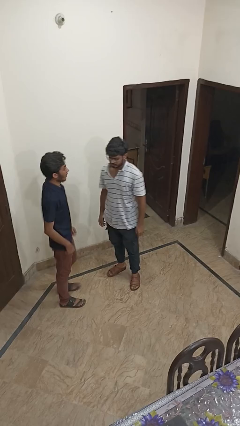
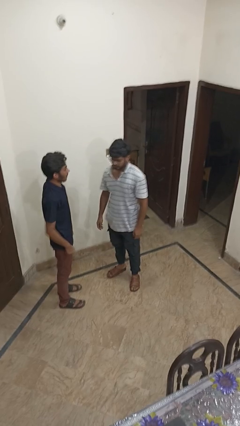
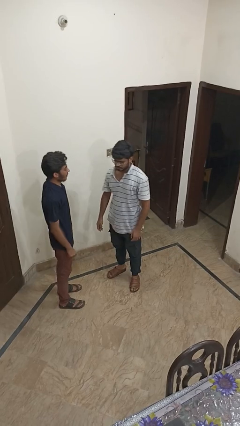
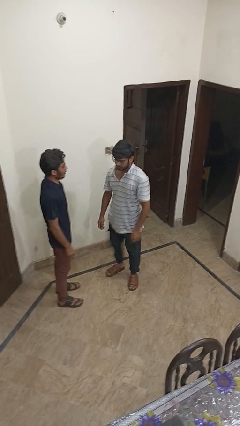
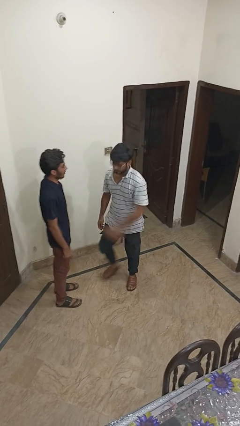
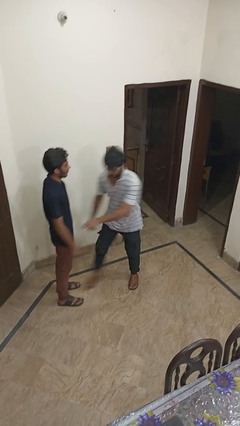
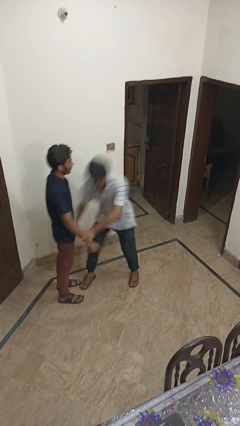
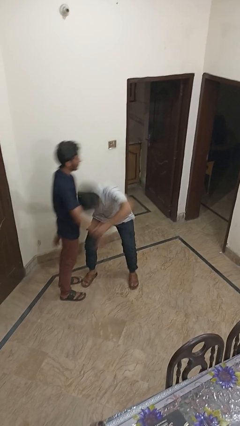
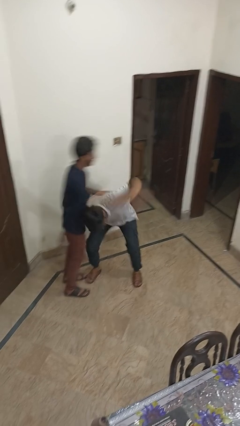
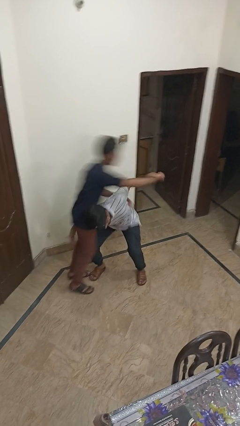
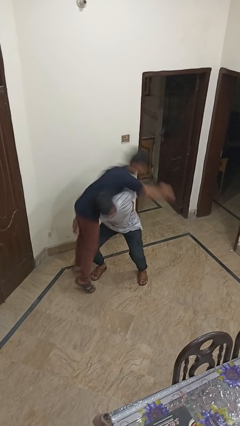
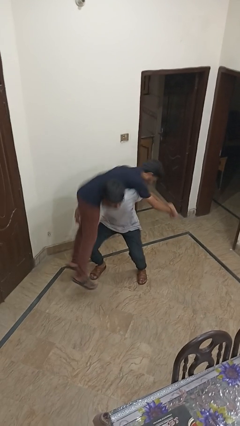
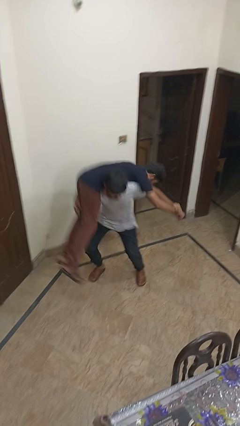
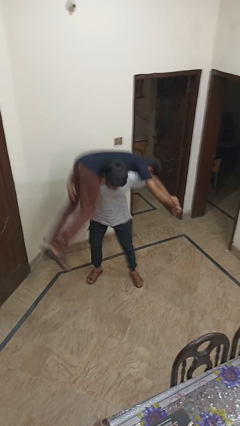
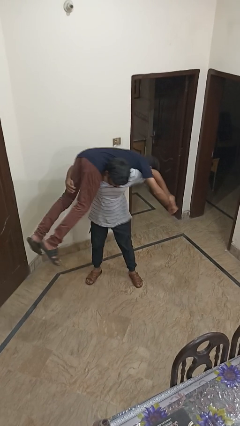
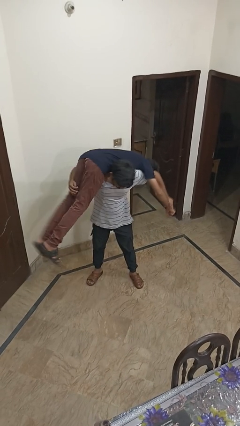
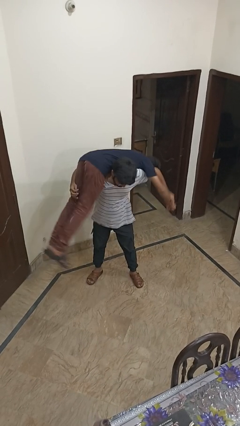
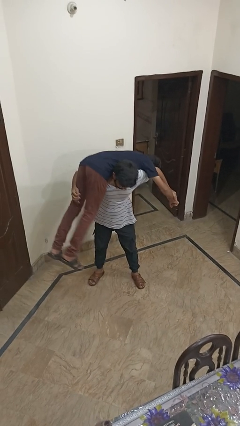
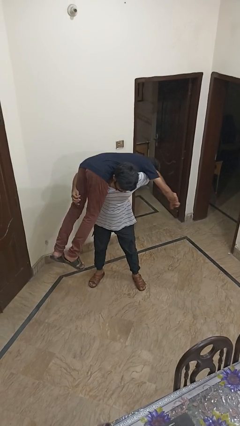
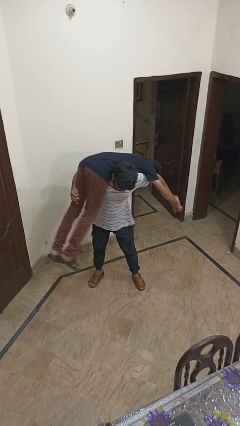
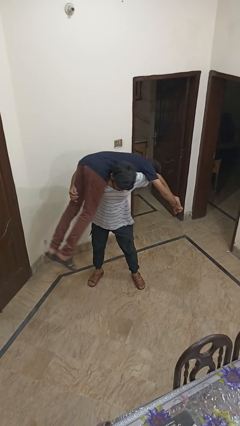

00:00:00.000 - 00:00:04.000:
person carries person over shoulder

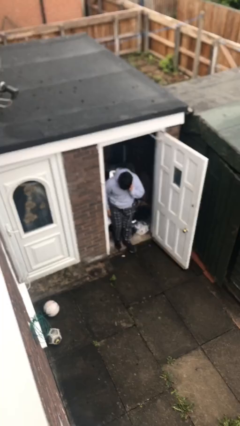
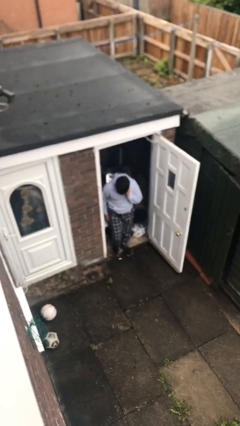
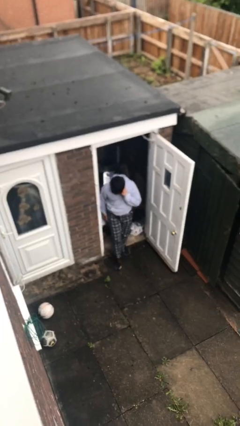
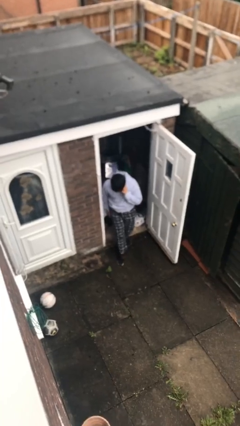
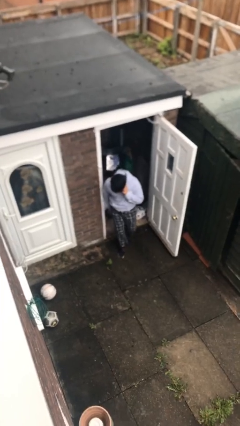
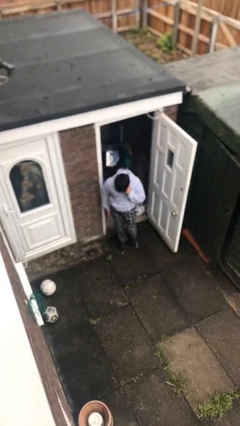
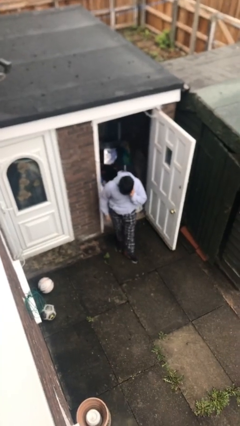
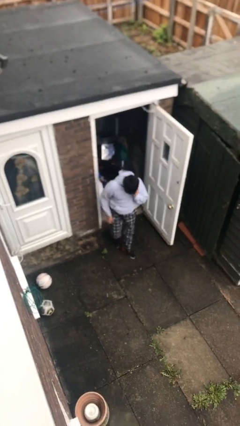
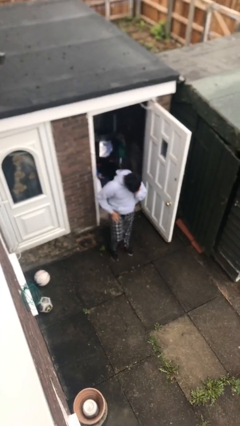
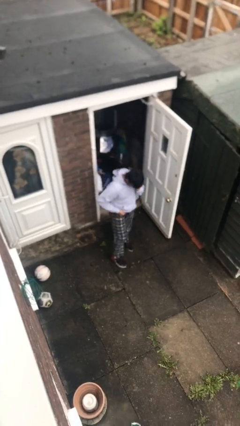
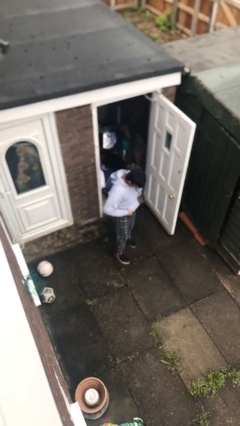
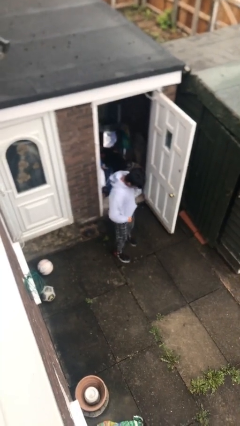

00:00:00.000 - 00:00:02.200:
person enters scene through structure

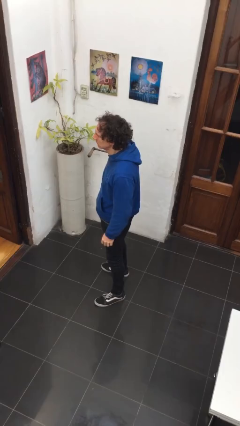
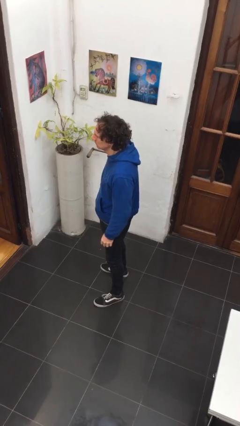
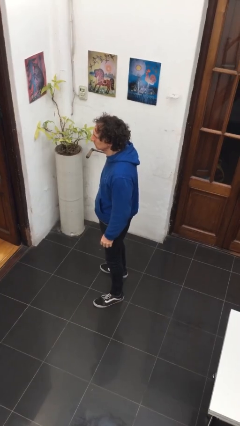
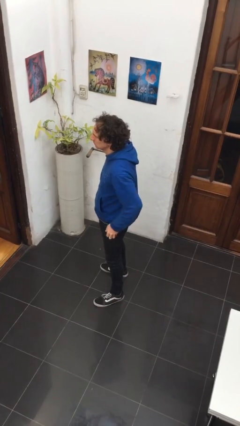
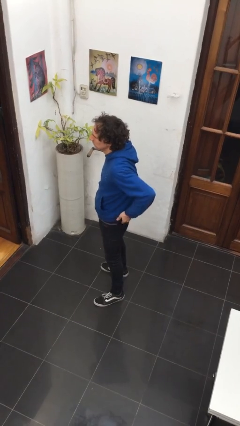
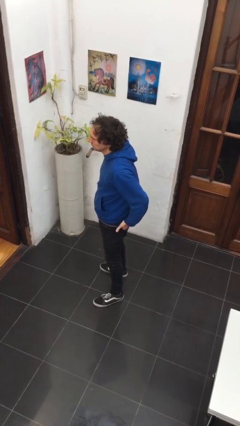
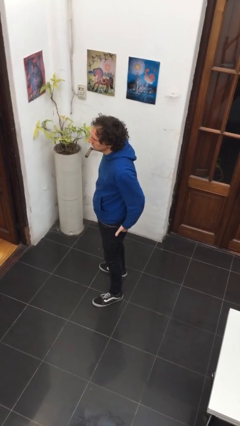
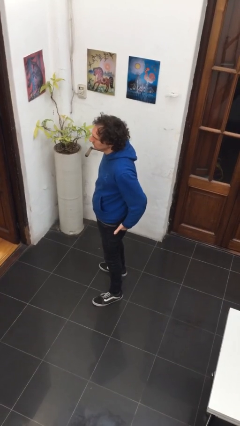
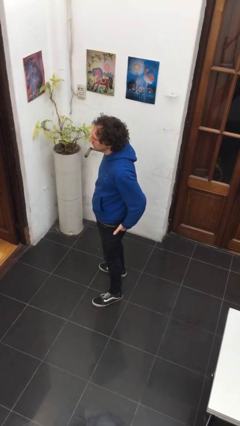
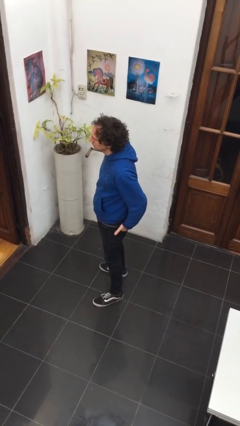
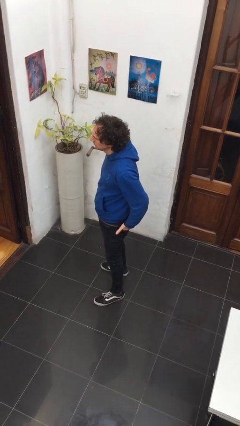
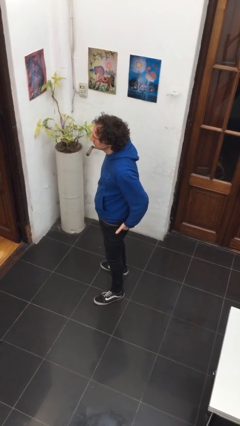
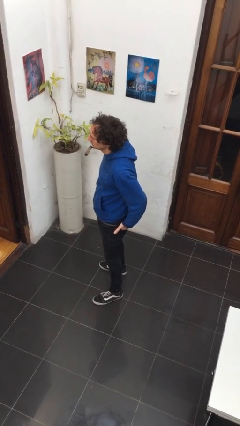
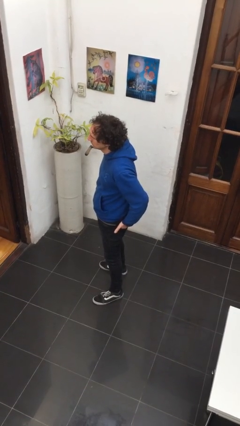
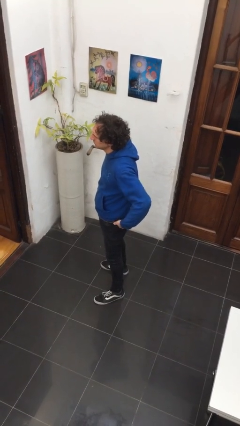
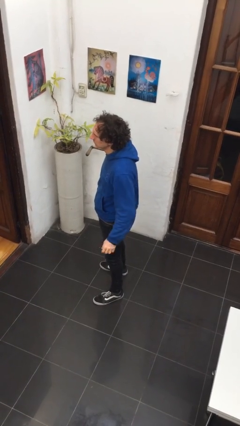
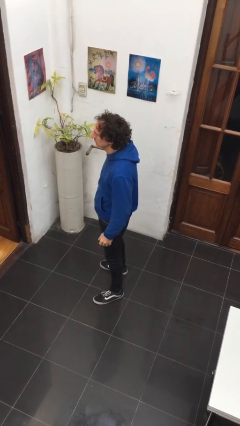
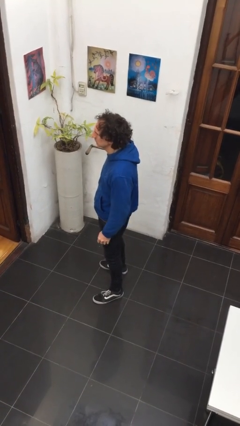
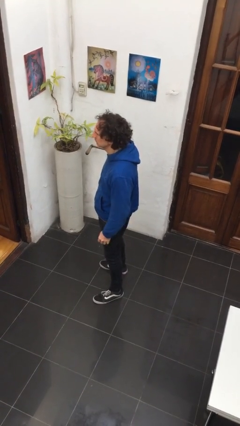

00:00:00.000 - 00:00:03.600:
person puts hands in back pockets

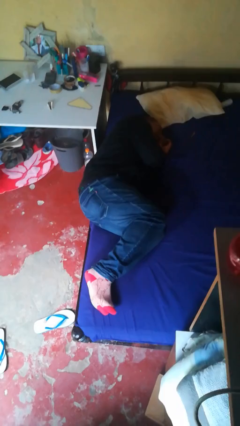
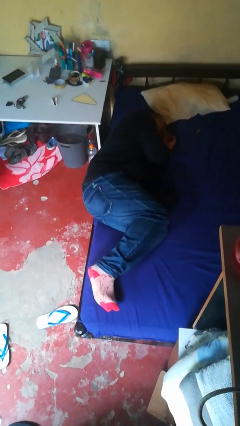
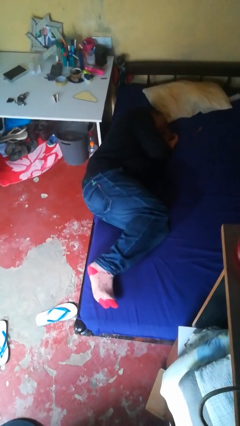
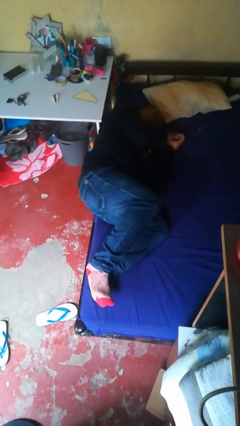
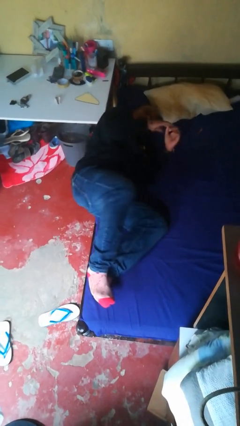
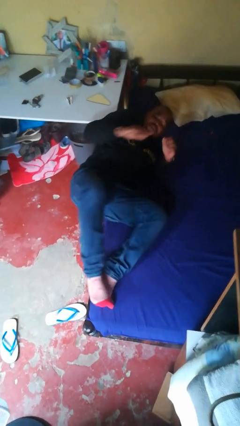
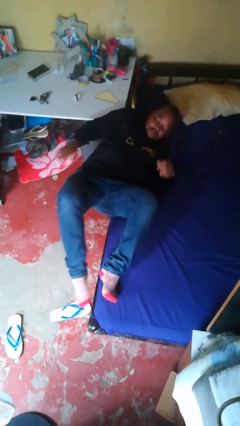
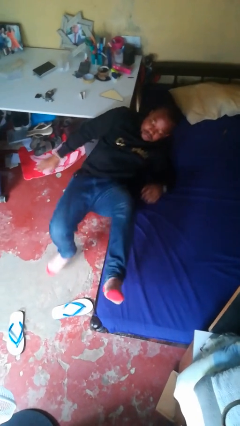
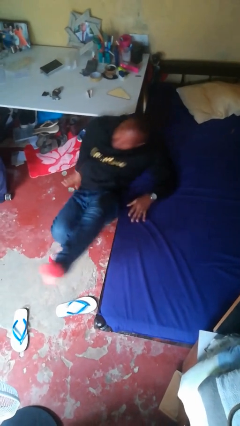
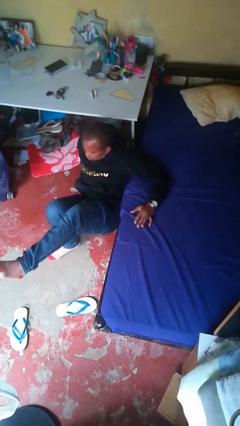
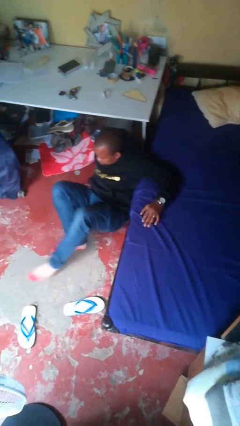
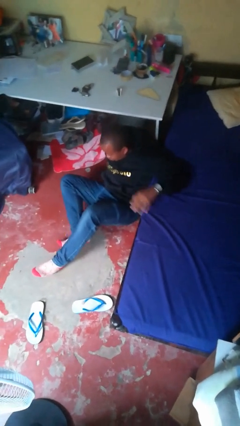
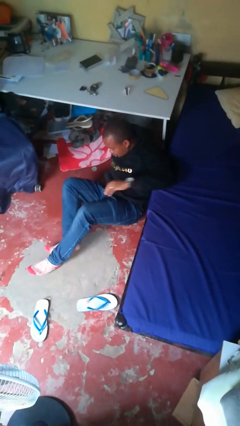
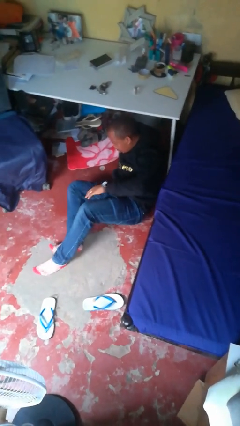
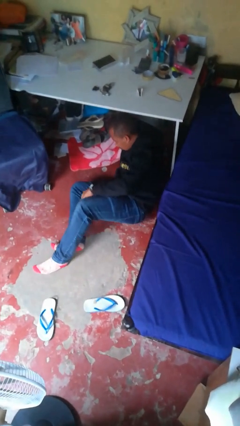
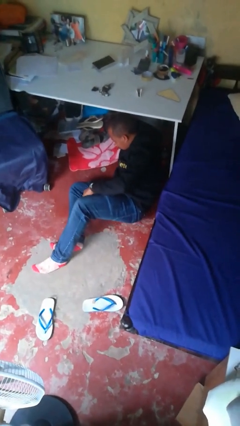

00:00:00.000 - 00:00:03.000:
person falls from bed

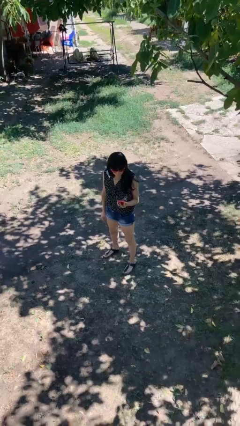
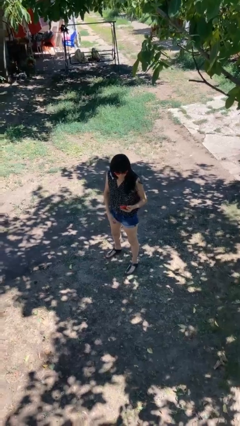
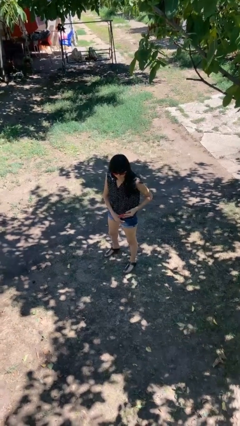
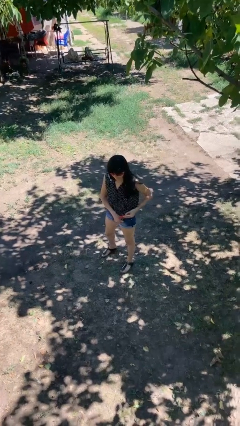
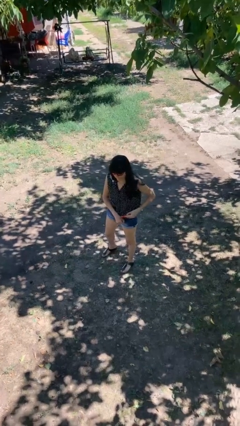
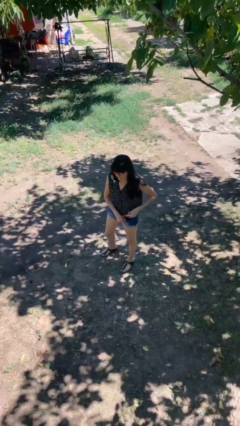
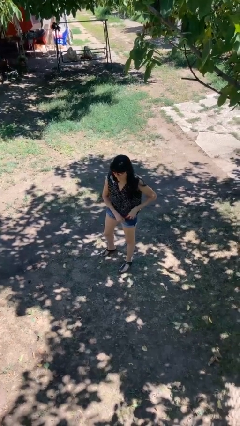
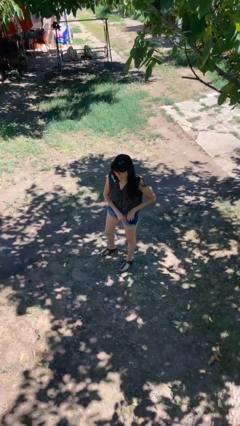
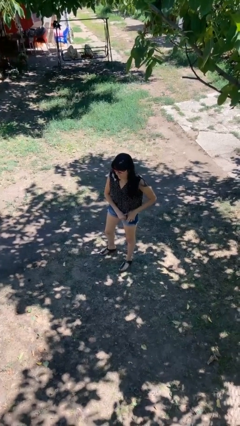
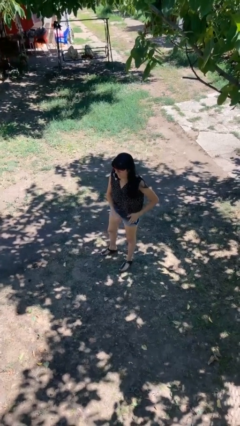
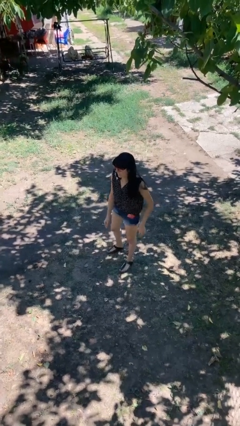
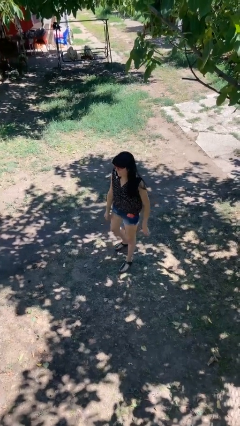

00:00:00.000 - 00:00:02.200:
person puts phone into pocket

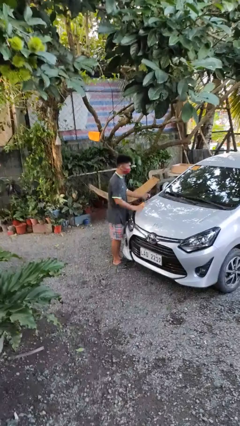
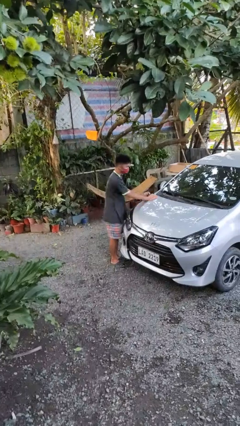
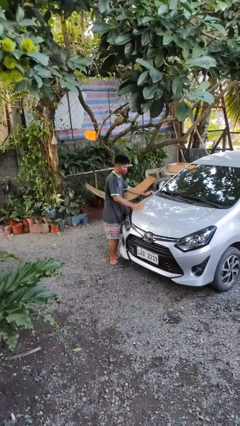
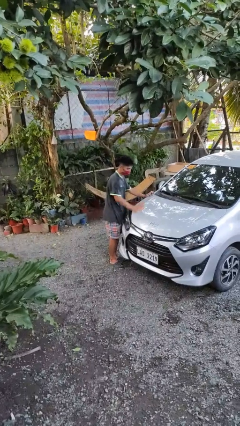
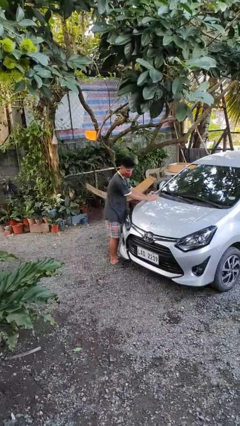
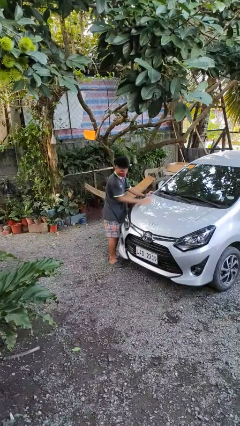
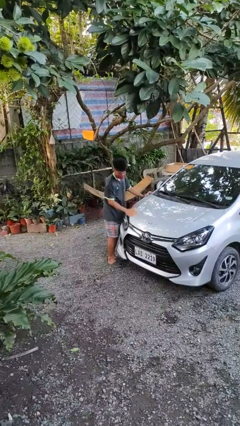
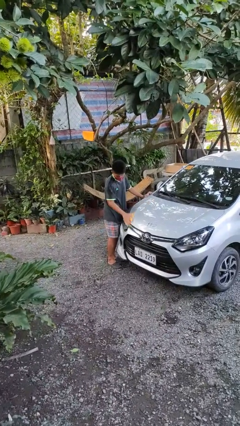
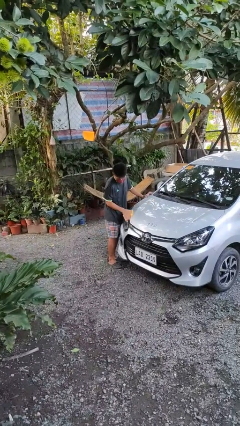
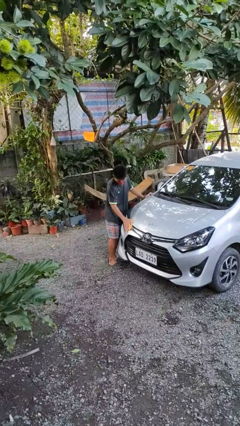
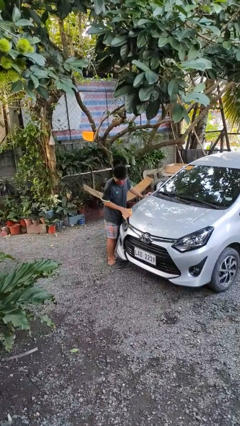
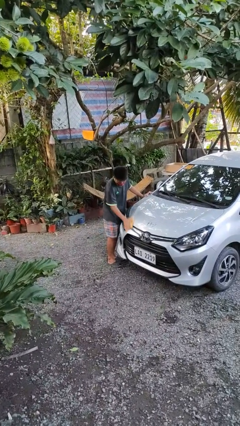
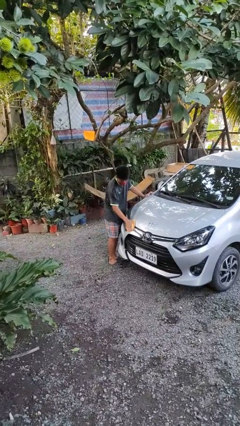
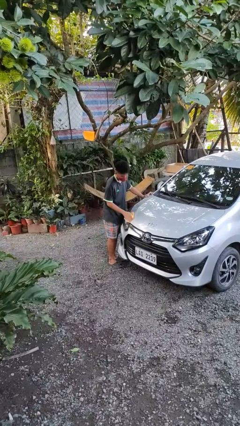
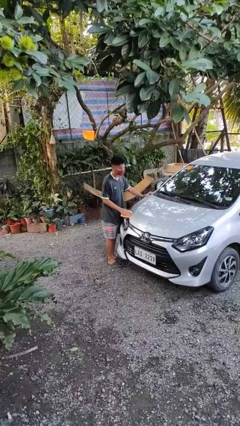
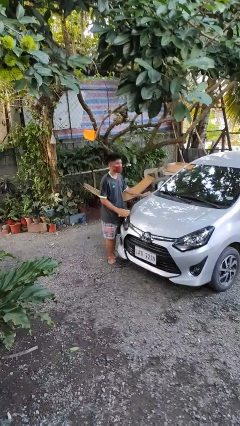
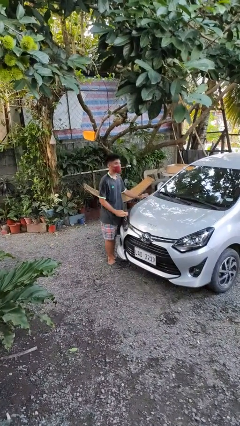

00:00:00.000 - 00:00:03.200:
person polishes car with rag
